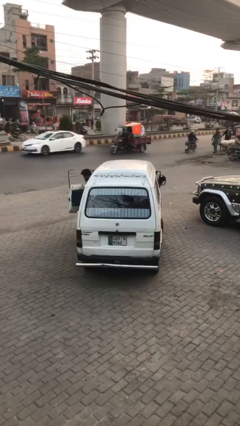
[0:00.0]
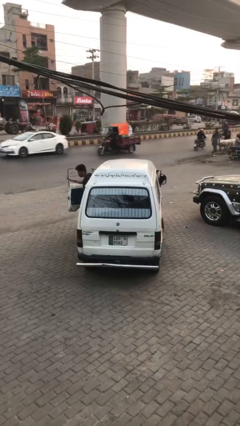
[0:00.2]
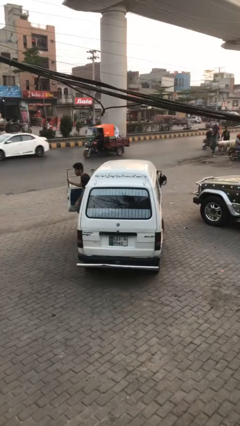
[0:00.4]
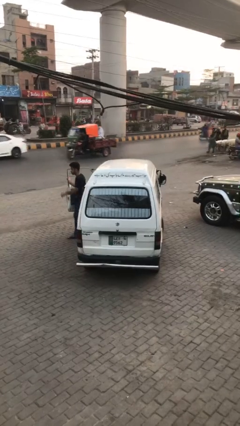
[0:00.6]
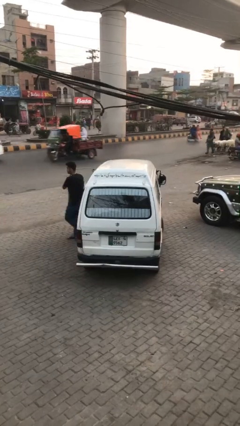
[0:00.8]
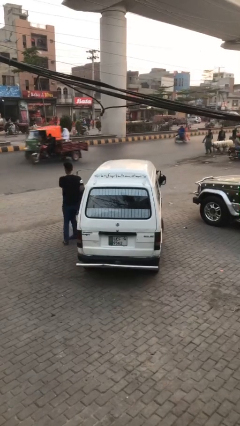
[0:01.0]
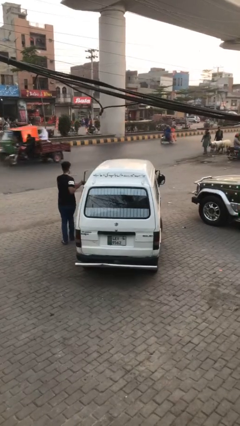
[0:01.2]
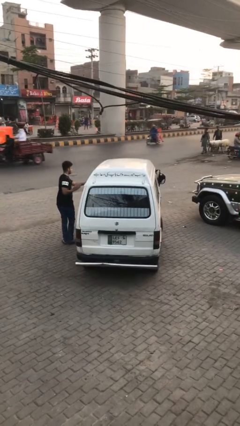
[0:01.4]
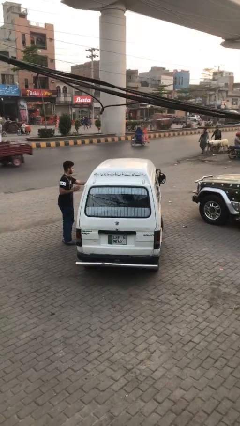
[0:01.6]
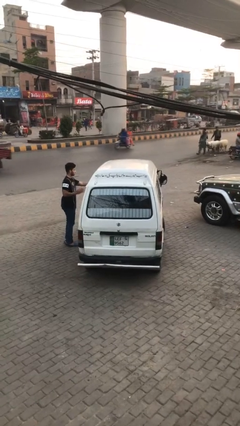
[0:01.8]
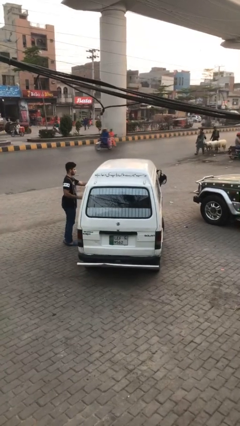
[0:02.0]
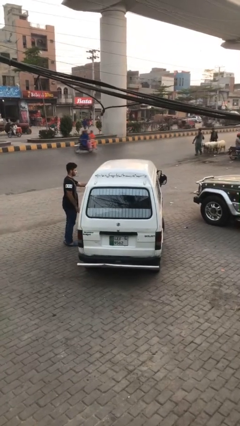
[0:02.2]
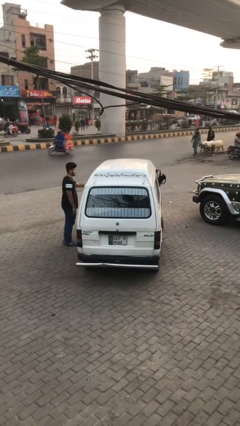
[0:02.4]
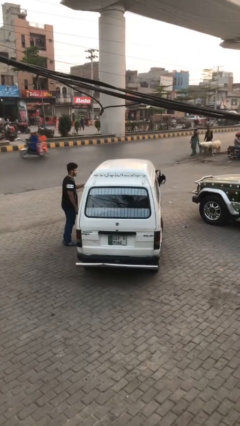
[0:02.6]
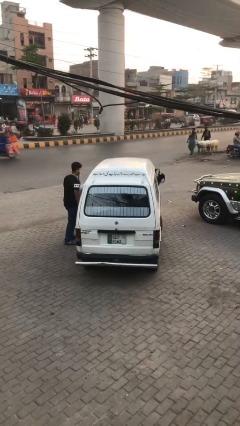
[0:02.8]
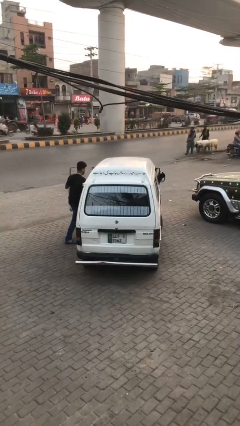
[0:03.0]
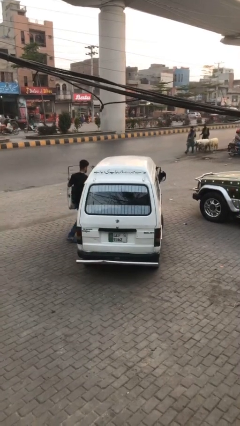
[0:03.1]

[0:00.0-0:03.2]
car drops off person

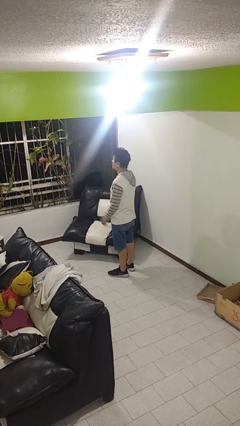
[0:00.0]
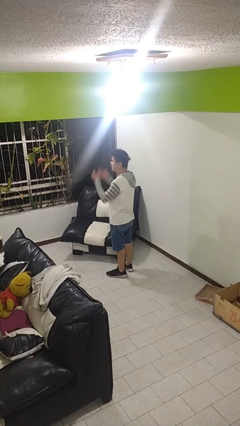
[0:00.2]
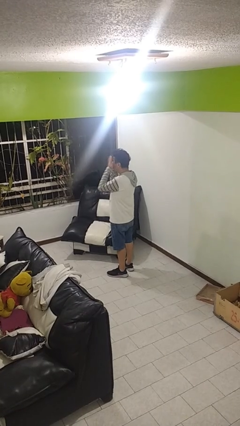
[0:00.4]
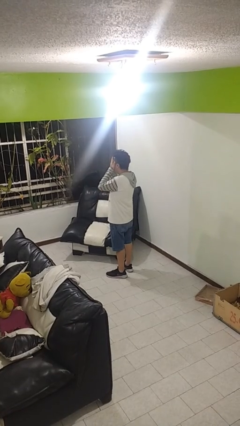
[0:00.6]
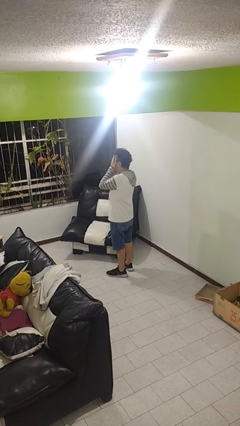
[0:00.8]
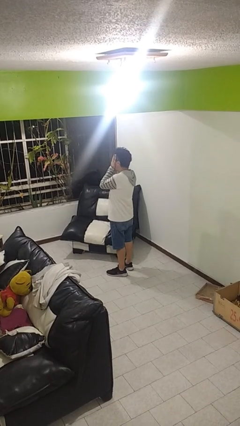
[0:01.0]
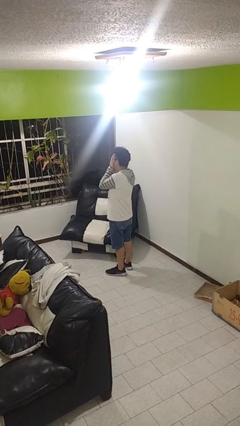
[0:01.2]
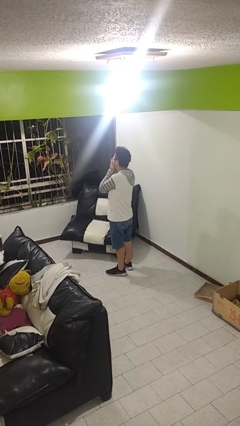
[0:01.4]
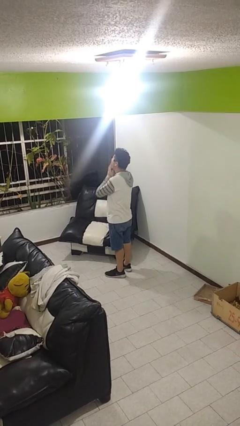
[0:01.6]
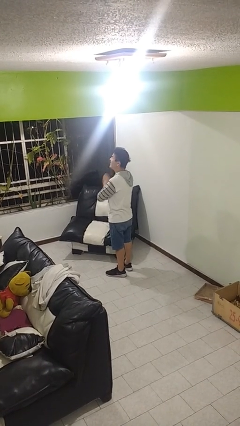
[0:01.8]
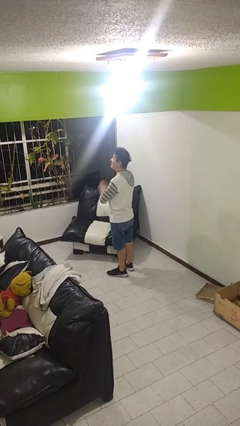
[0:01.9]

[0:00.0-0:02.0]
person covers face with hands

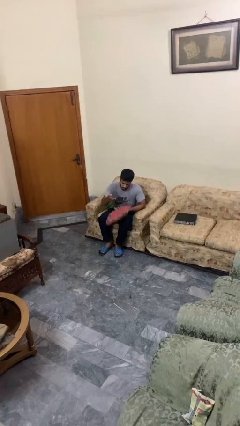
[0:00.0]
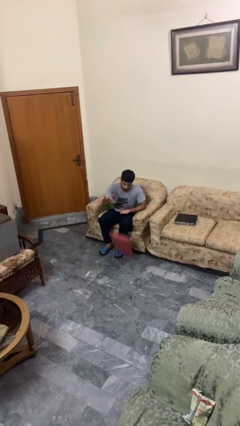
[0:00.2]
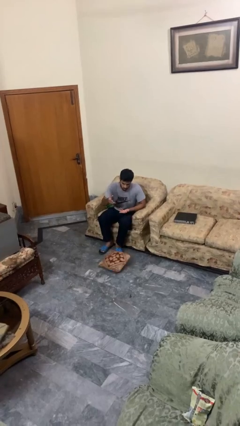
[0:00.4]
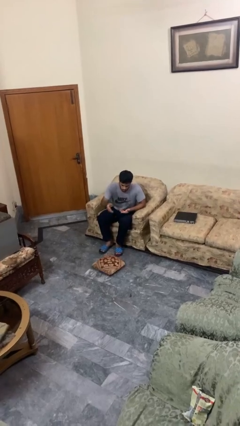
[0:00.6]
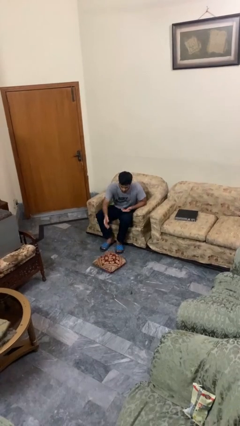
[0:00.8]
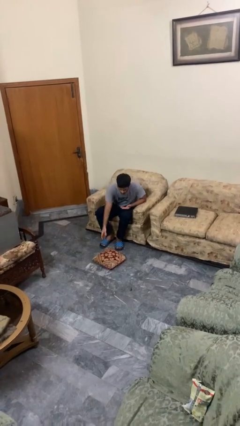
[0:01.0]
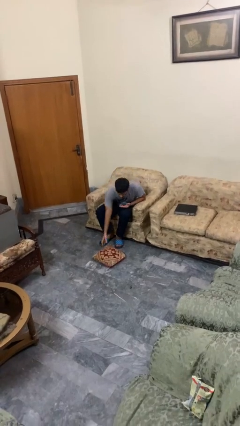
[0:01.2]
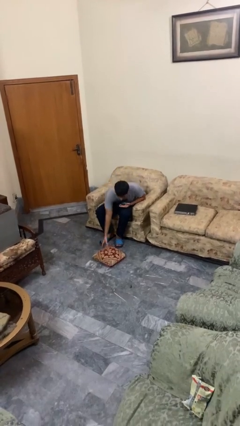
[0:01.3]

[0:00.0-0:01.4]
person drops object

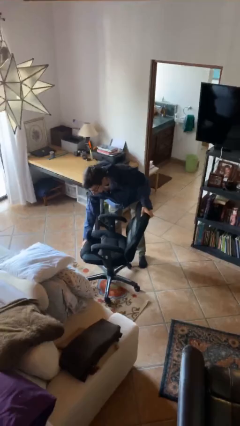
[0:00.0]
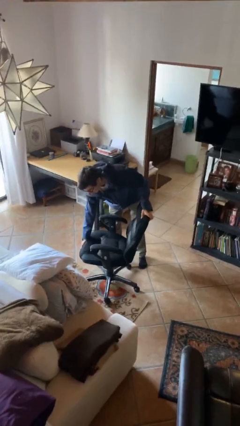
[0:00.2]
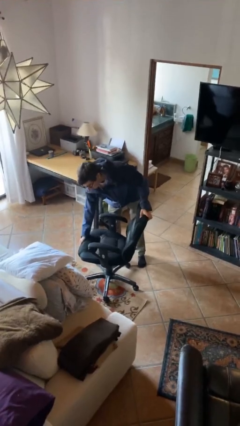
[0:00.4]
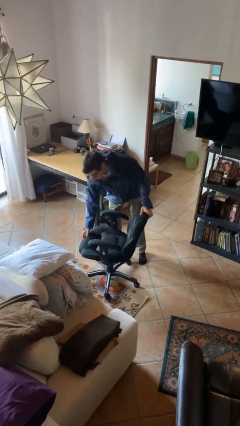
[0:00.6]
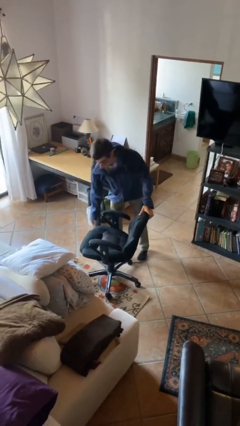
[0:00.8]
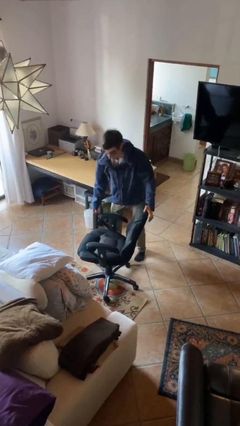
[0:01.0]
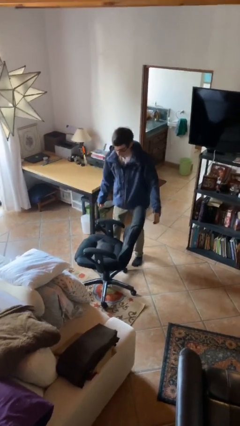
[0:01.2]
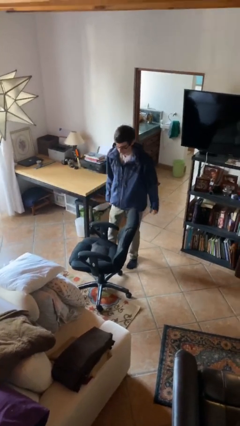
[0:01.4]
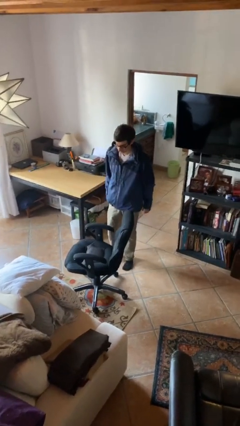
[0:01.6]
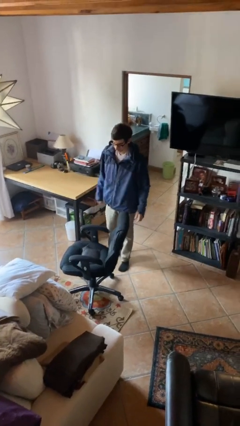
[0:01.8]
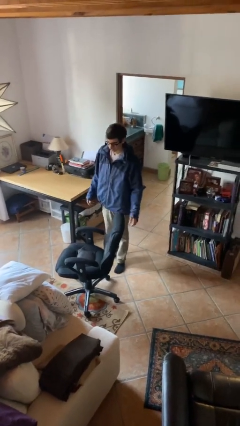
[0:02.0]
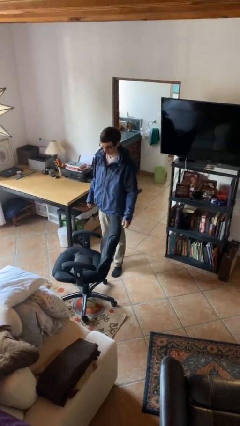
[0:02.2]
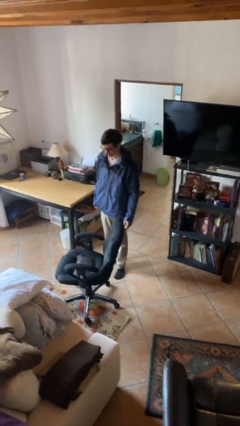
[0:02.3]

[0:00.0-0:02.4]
person puts down object on floor

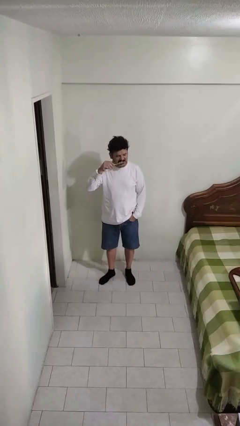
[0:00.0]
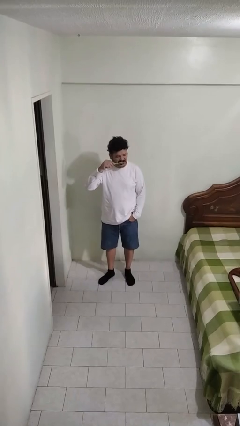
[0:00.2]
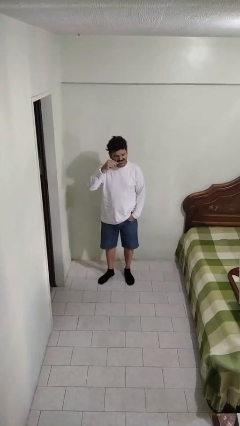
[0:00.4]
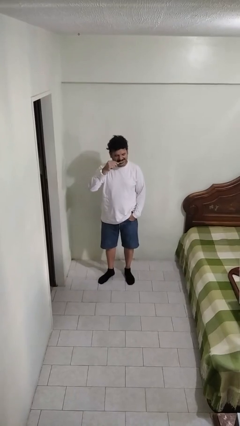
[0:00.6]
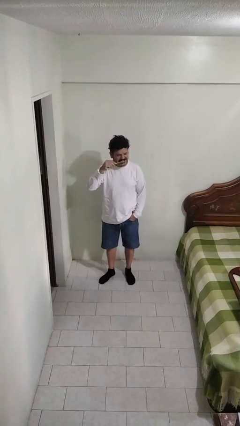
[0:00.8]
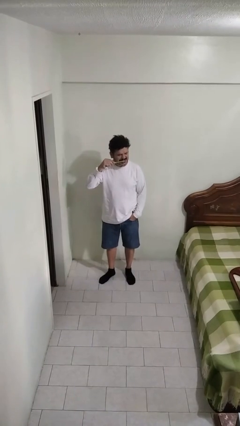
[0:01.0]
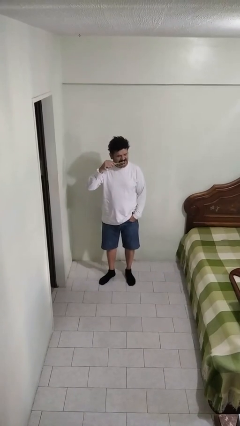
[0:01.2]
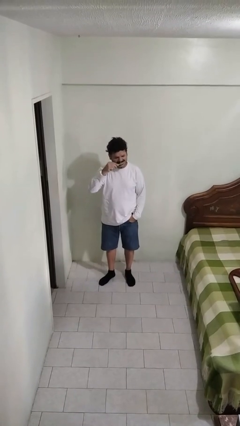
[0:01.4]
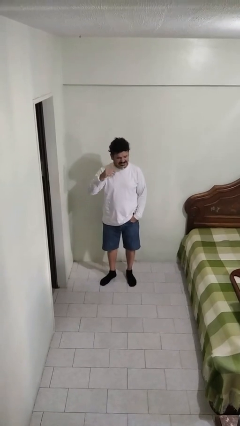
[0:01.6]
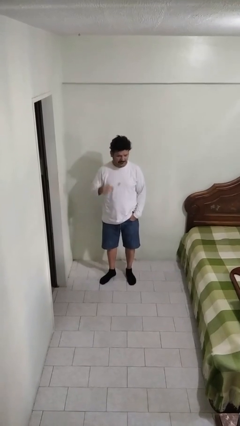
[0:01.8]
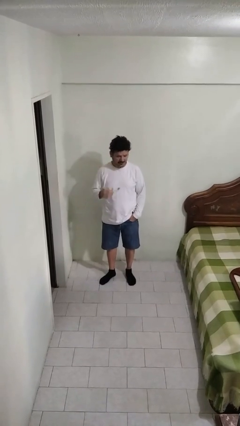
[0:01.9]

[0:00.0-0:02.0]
person brushes teeth

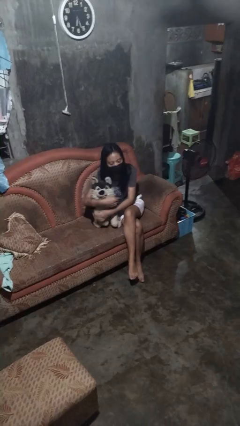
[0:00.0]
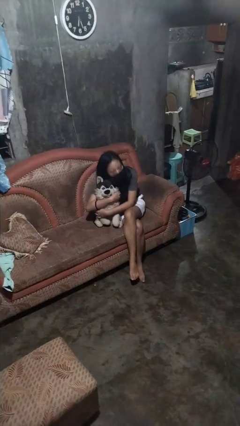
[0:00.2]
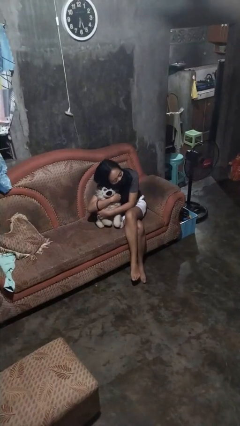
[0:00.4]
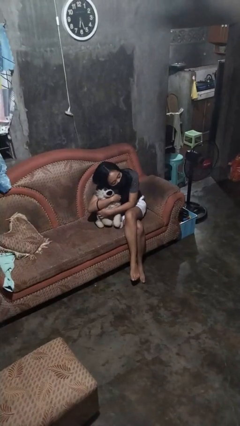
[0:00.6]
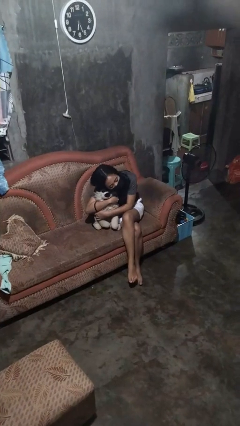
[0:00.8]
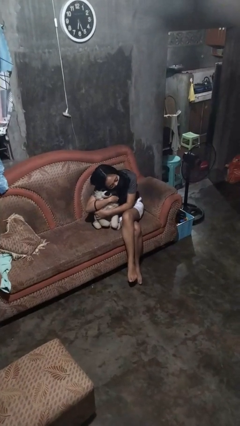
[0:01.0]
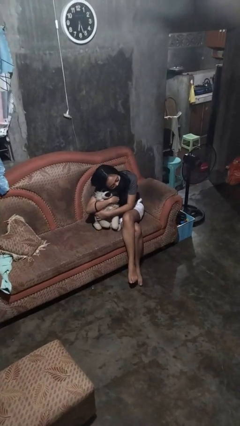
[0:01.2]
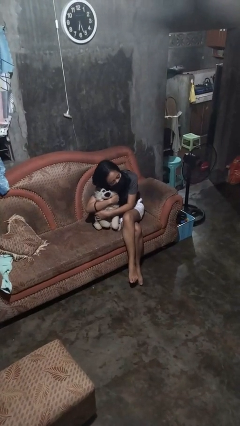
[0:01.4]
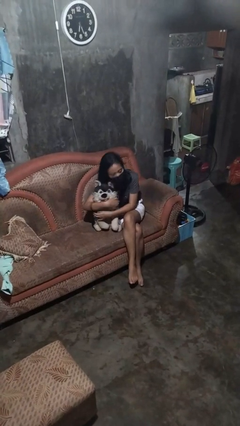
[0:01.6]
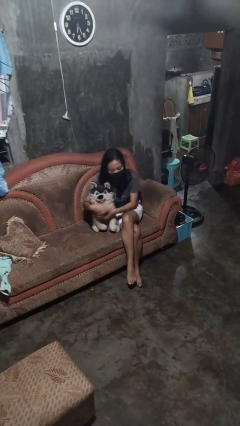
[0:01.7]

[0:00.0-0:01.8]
person hugs stuffed animal

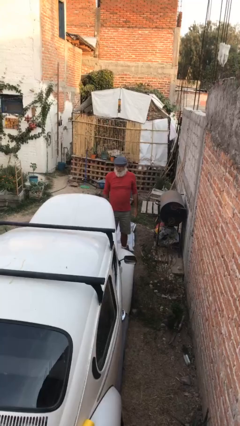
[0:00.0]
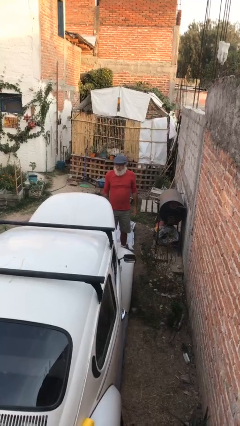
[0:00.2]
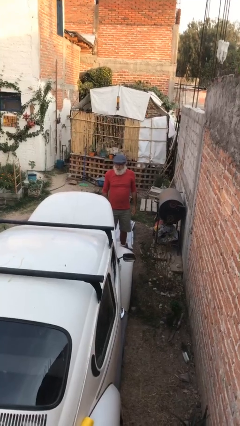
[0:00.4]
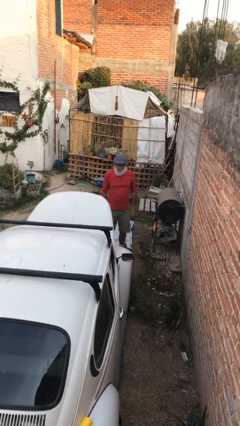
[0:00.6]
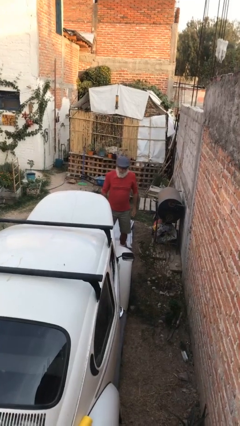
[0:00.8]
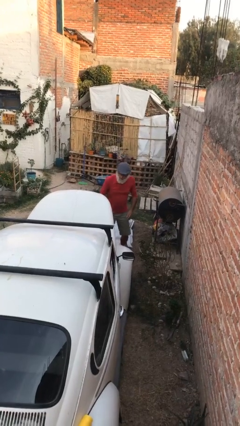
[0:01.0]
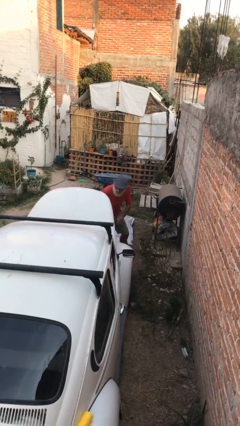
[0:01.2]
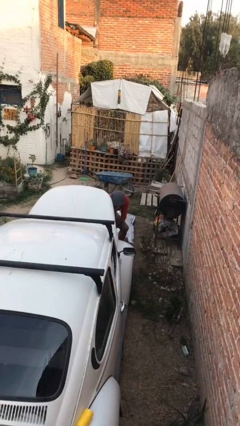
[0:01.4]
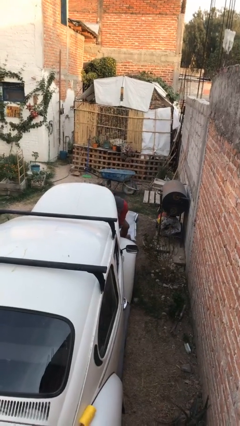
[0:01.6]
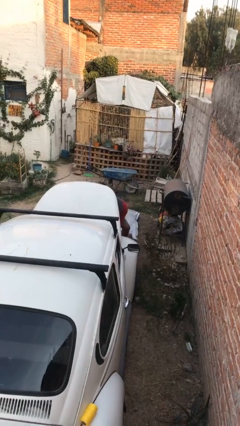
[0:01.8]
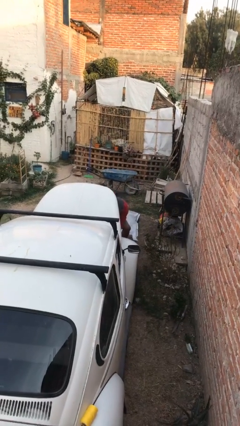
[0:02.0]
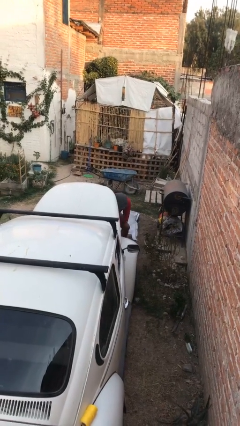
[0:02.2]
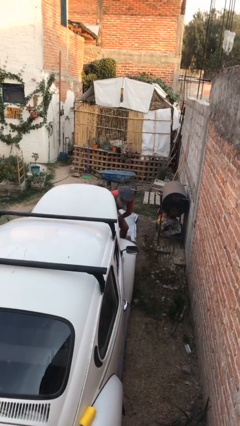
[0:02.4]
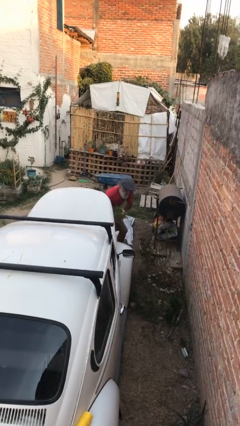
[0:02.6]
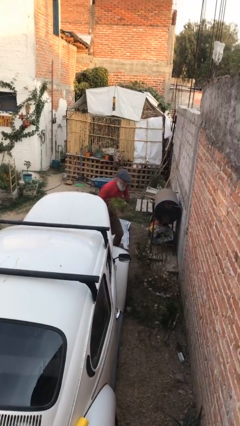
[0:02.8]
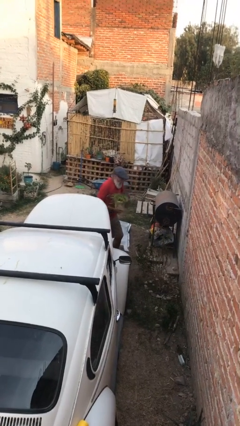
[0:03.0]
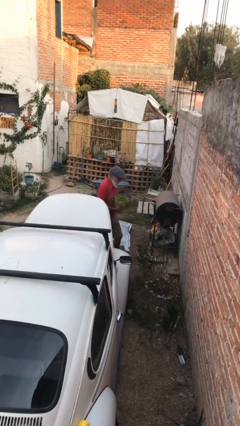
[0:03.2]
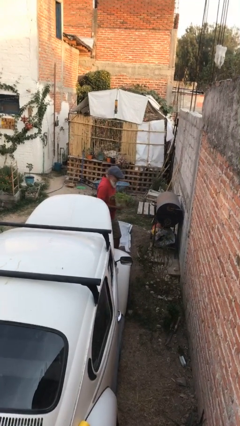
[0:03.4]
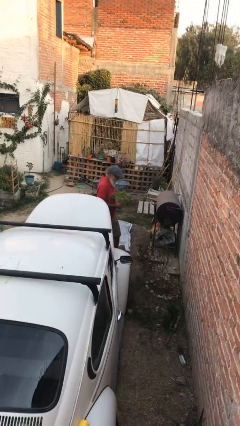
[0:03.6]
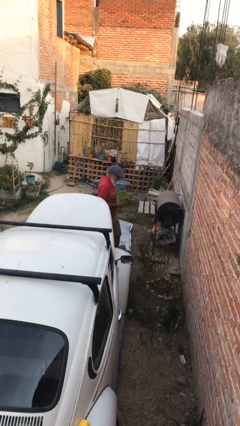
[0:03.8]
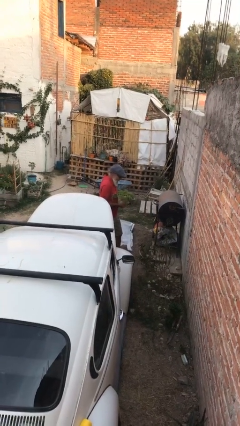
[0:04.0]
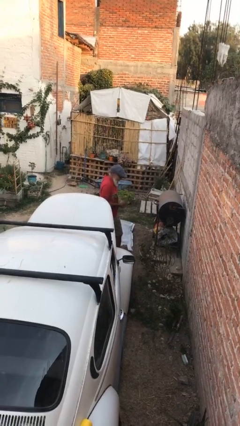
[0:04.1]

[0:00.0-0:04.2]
person unloads car
